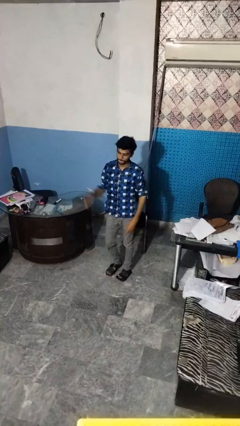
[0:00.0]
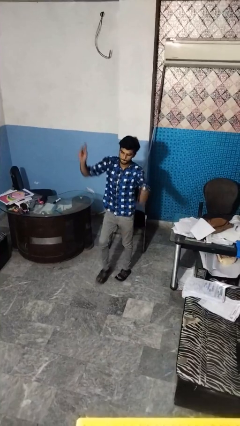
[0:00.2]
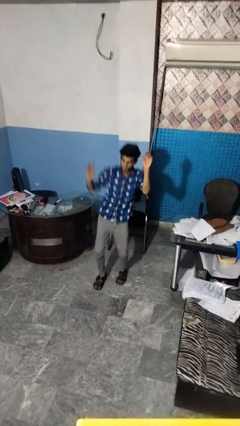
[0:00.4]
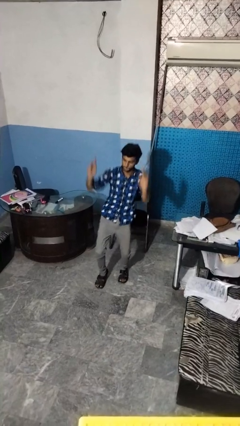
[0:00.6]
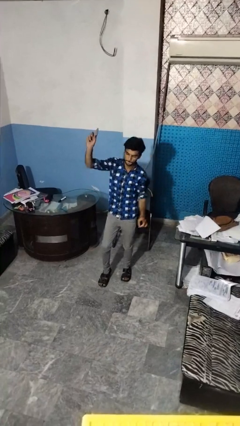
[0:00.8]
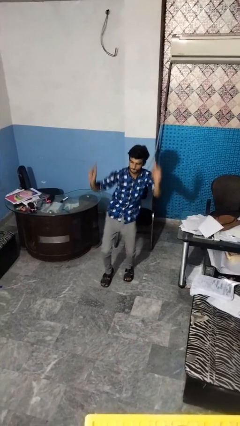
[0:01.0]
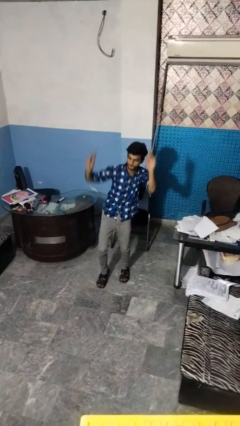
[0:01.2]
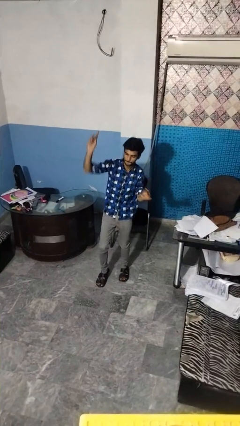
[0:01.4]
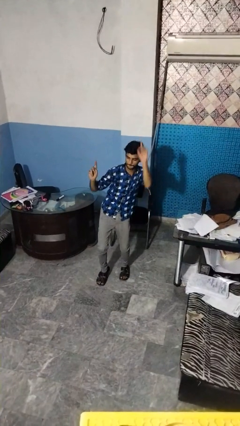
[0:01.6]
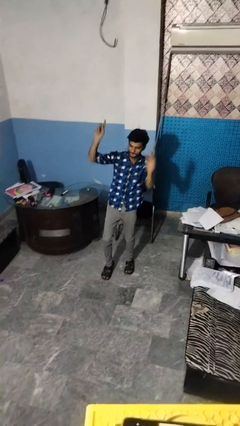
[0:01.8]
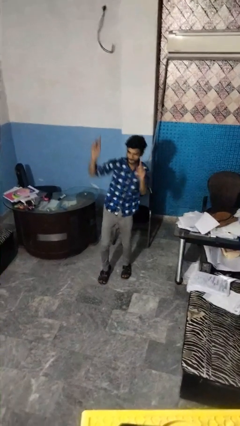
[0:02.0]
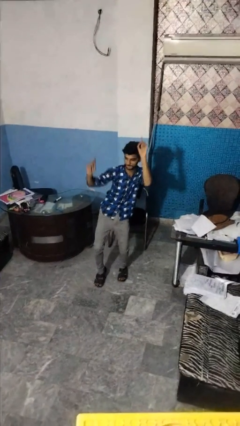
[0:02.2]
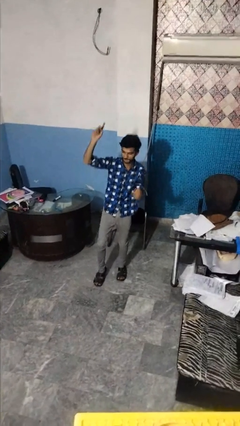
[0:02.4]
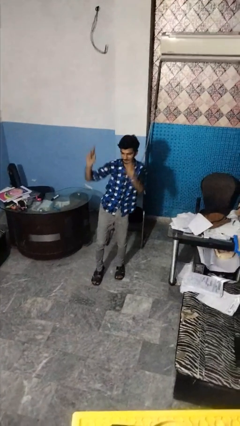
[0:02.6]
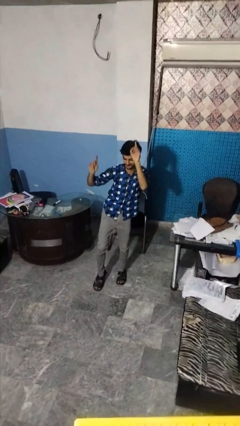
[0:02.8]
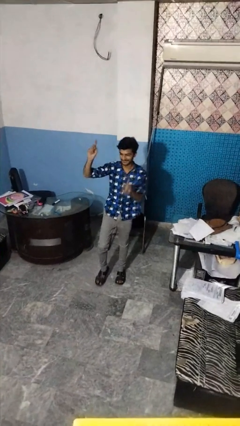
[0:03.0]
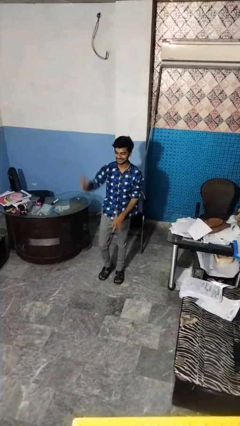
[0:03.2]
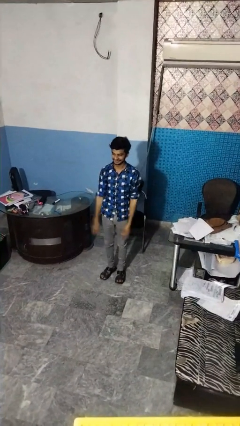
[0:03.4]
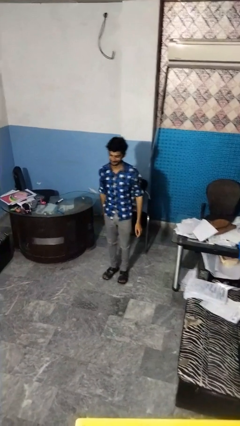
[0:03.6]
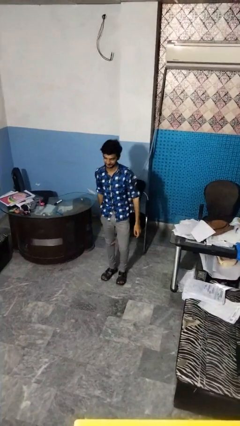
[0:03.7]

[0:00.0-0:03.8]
person dances in place

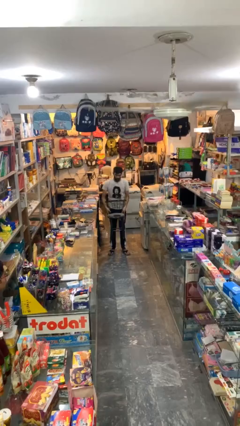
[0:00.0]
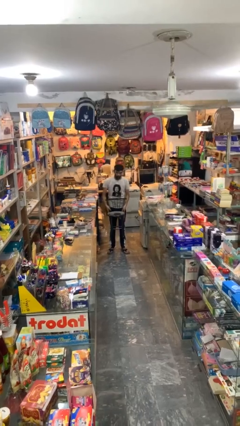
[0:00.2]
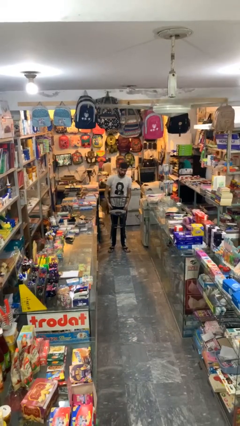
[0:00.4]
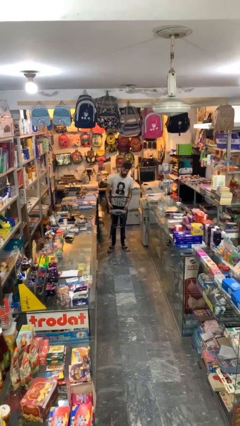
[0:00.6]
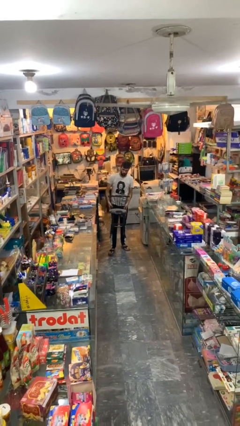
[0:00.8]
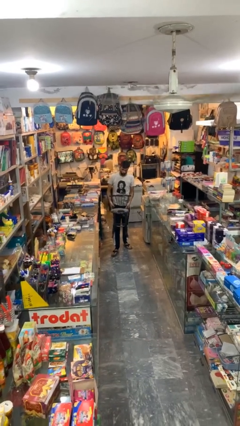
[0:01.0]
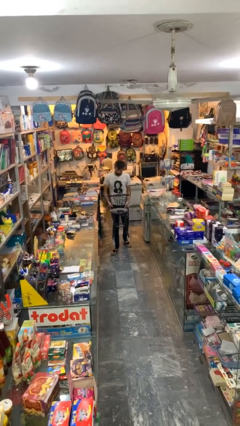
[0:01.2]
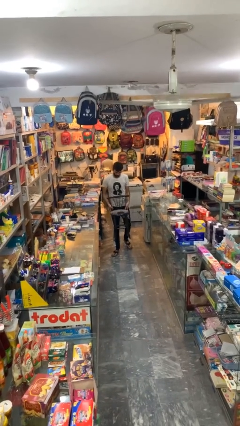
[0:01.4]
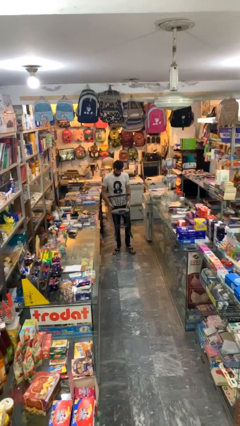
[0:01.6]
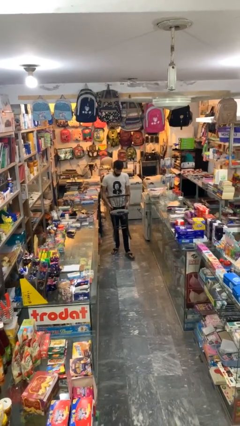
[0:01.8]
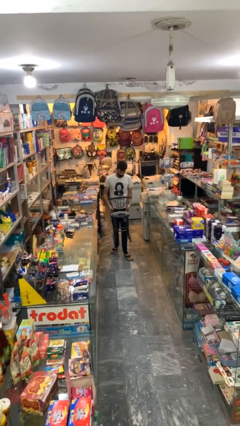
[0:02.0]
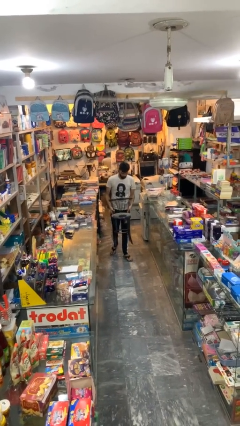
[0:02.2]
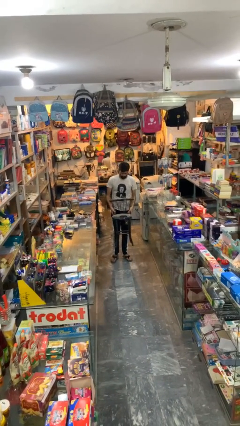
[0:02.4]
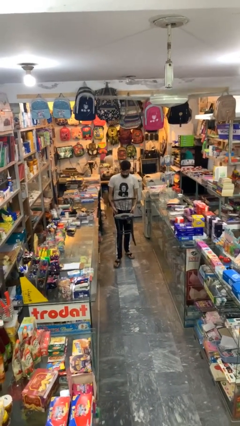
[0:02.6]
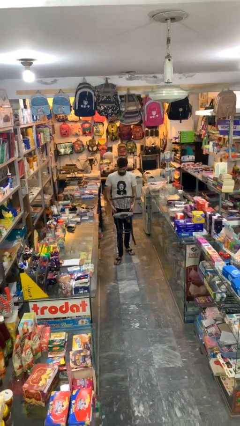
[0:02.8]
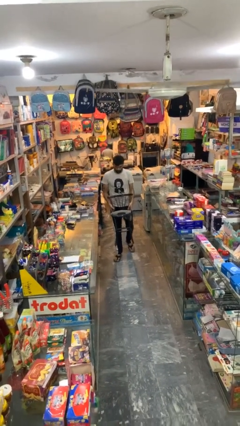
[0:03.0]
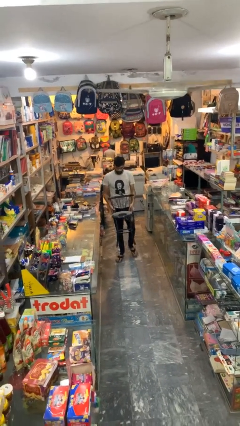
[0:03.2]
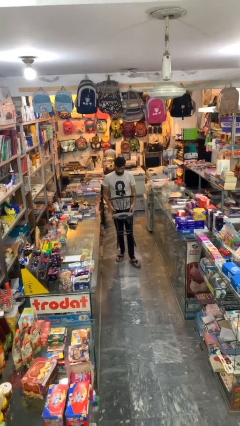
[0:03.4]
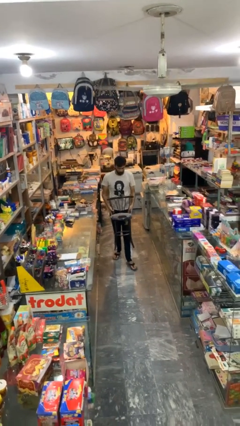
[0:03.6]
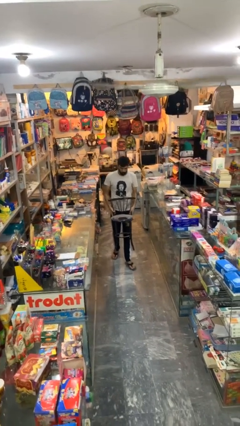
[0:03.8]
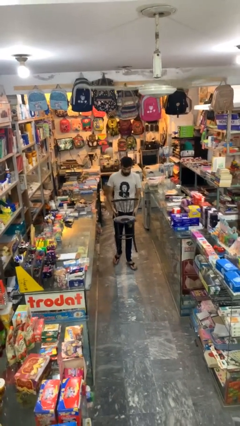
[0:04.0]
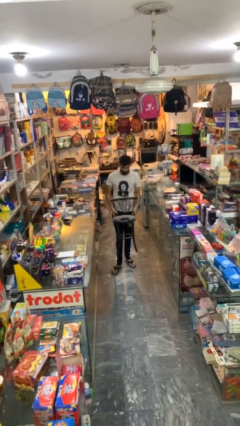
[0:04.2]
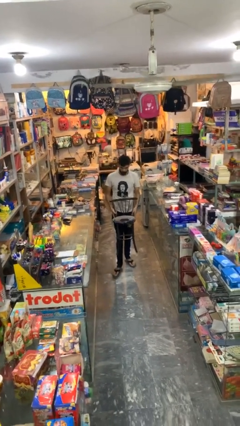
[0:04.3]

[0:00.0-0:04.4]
person carries heavy object

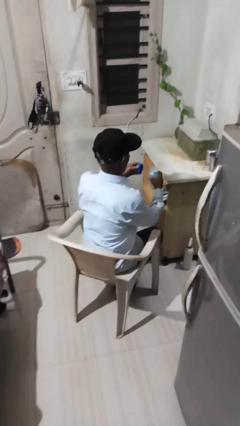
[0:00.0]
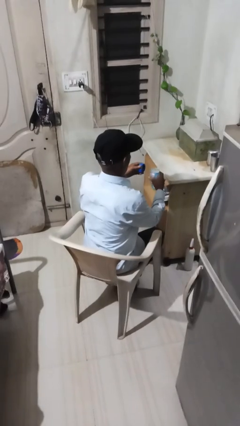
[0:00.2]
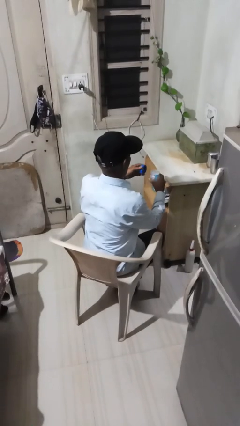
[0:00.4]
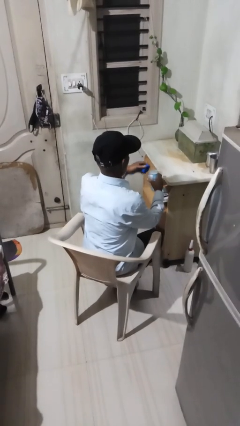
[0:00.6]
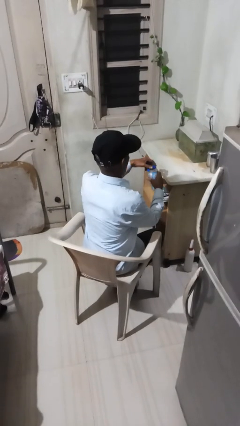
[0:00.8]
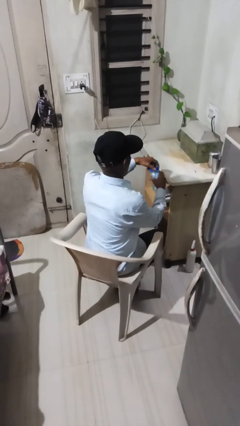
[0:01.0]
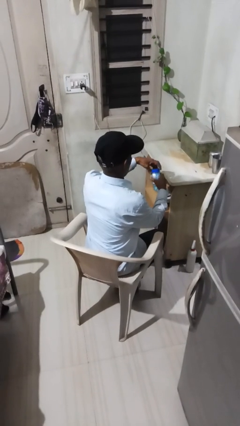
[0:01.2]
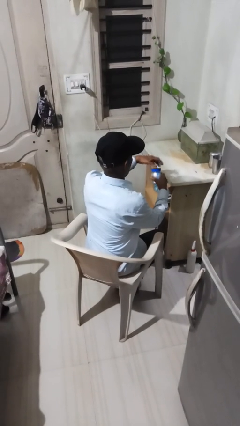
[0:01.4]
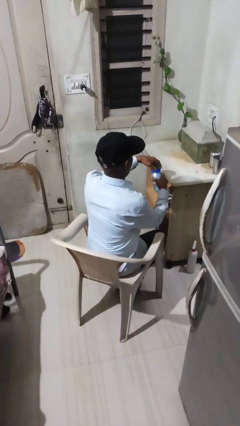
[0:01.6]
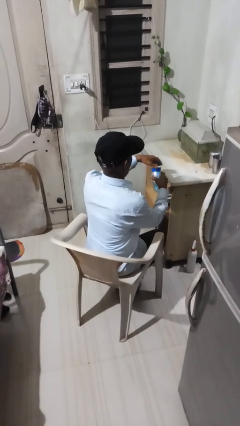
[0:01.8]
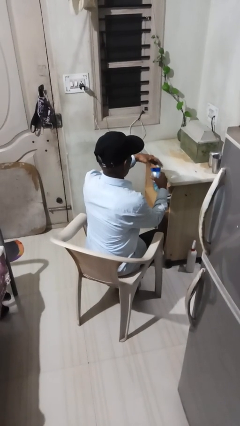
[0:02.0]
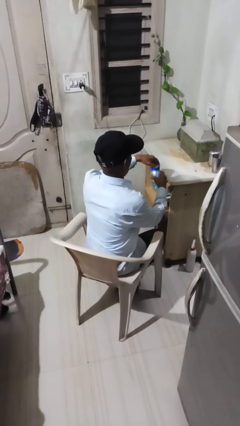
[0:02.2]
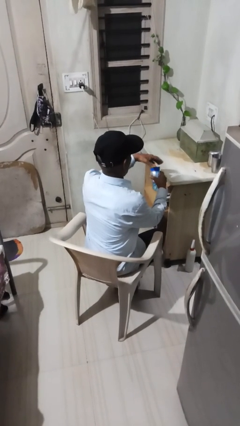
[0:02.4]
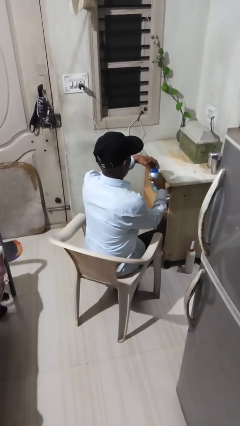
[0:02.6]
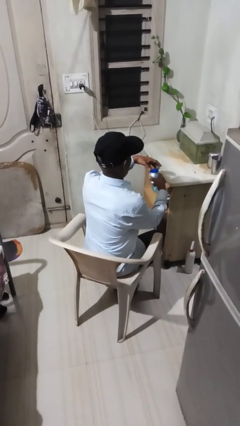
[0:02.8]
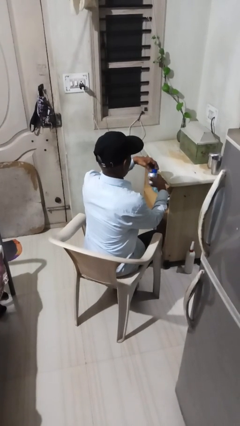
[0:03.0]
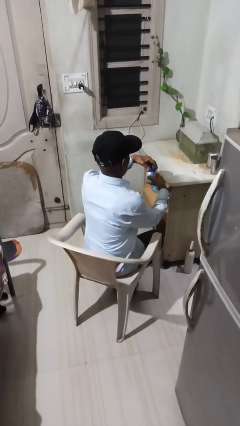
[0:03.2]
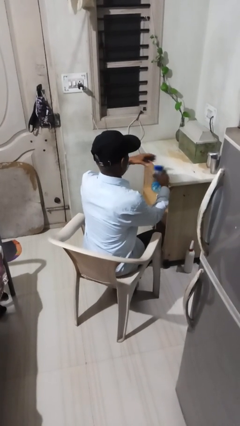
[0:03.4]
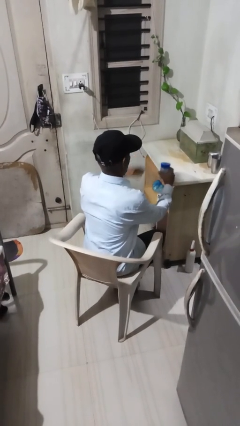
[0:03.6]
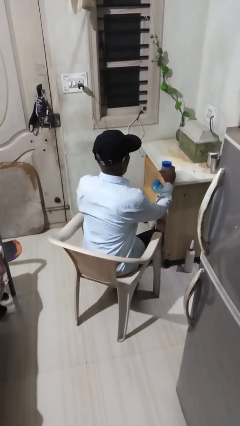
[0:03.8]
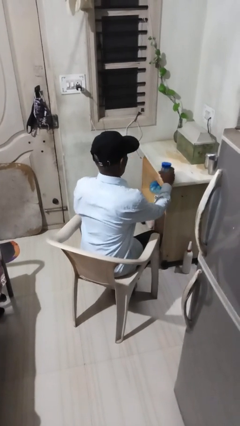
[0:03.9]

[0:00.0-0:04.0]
person closes jar

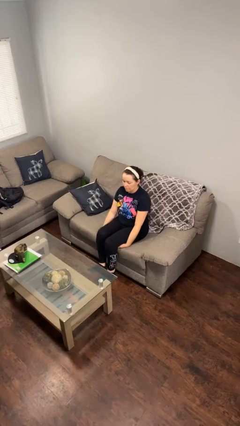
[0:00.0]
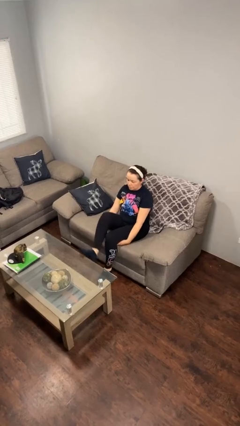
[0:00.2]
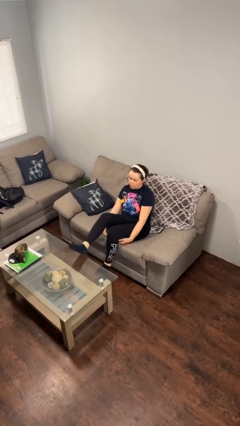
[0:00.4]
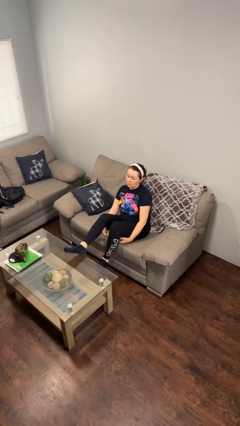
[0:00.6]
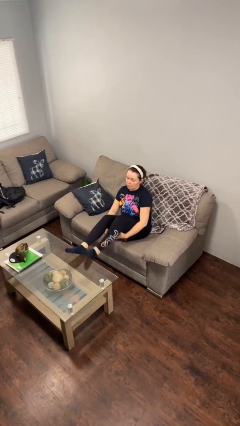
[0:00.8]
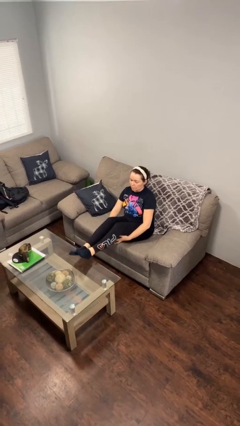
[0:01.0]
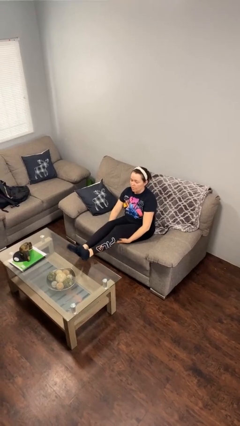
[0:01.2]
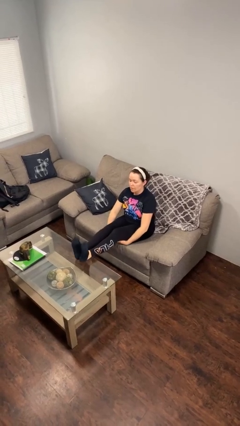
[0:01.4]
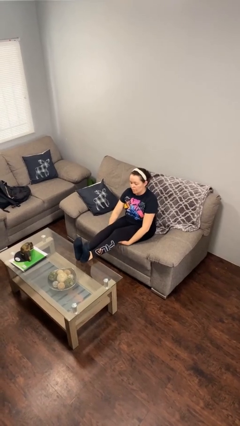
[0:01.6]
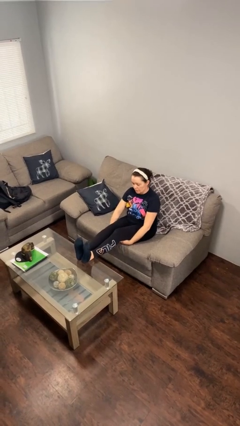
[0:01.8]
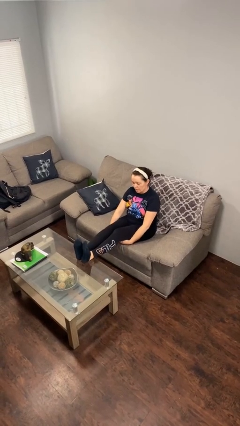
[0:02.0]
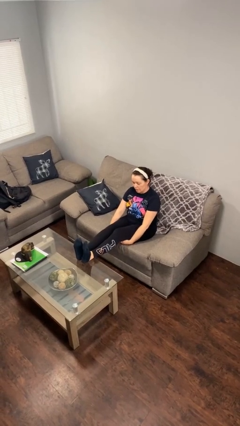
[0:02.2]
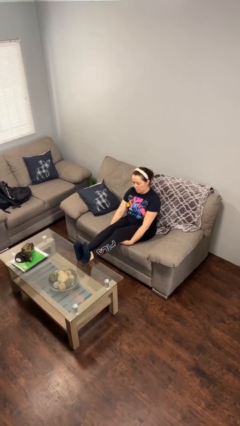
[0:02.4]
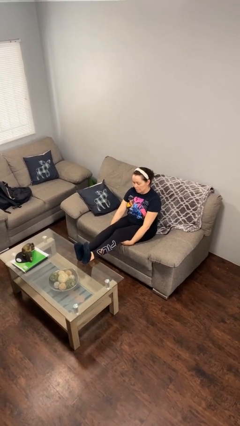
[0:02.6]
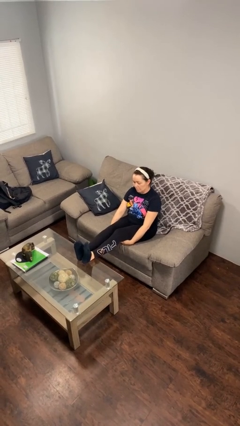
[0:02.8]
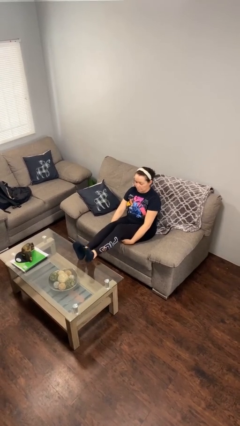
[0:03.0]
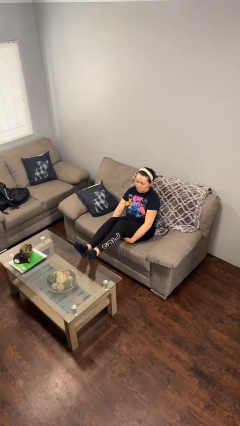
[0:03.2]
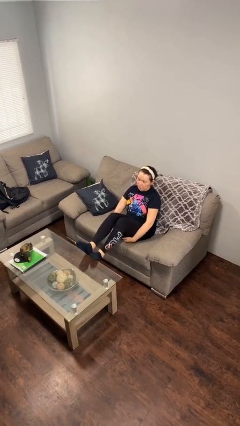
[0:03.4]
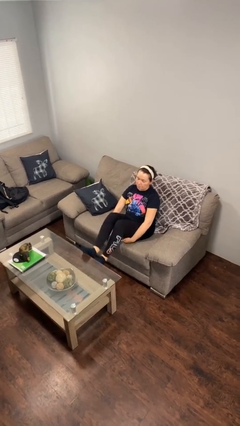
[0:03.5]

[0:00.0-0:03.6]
person puts feet up

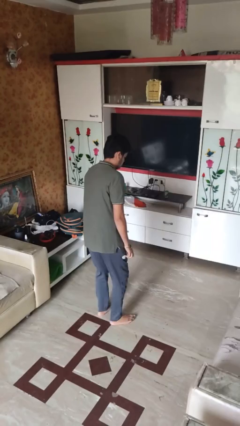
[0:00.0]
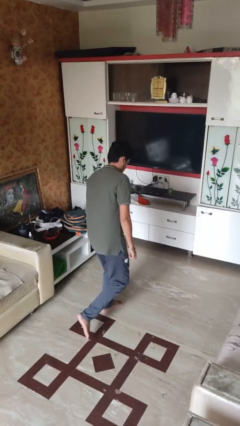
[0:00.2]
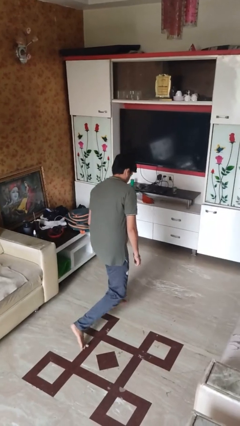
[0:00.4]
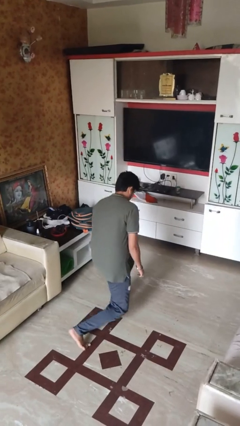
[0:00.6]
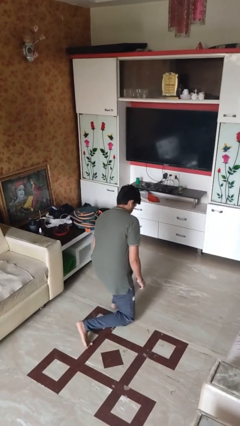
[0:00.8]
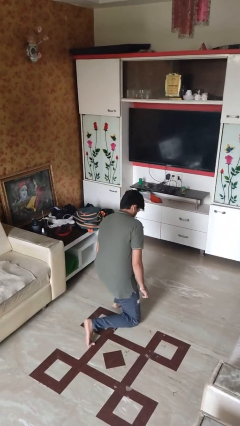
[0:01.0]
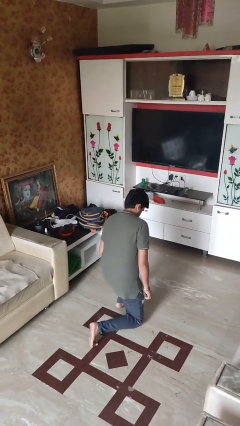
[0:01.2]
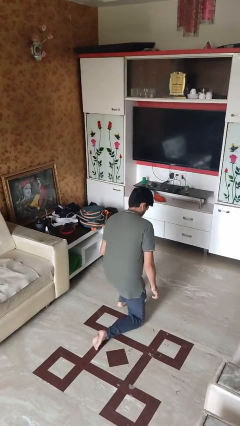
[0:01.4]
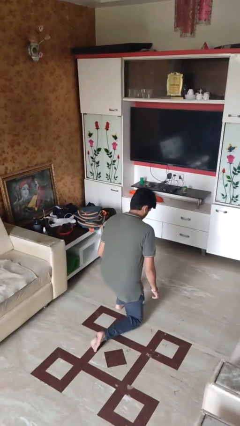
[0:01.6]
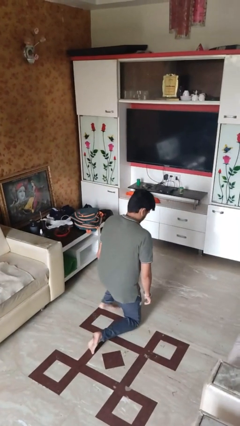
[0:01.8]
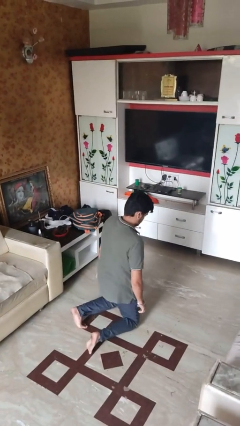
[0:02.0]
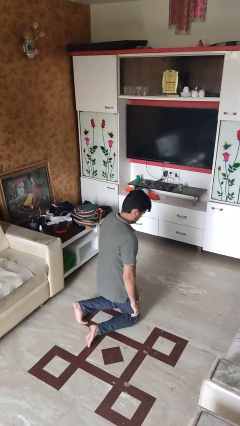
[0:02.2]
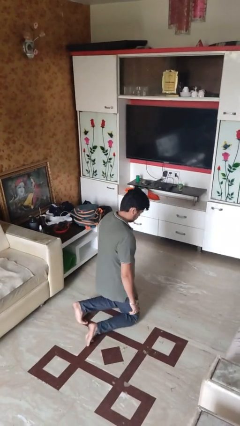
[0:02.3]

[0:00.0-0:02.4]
person kneels
